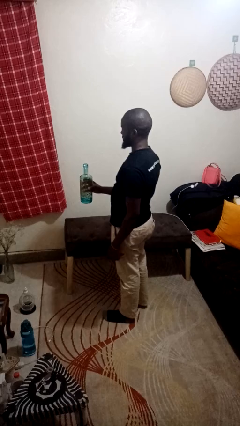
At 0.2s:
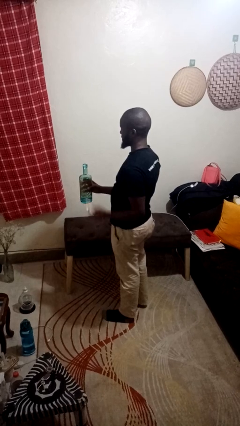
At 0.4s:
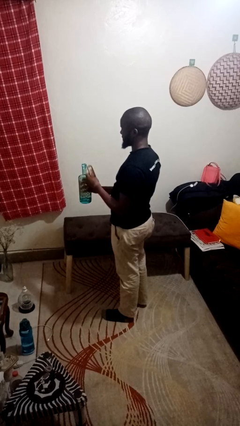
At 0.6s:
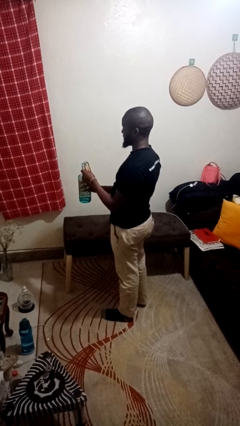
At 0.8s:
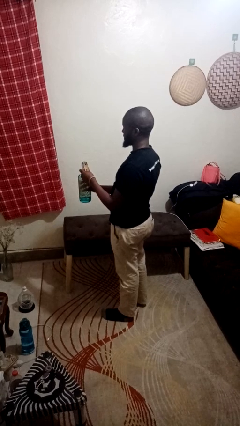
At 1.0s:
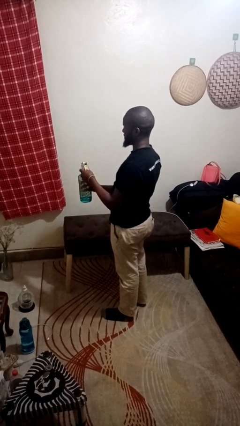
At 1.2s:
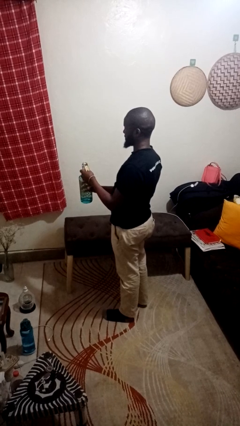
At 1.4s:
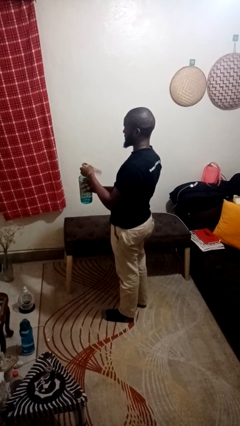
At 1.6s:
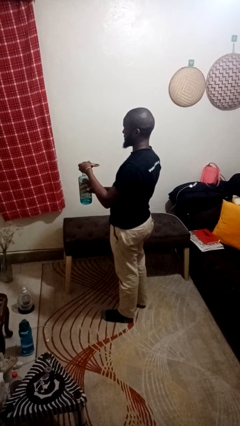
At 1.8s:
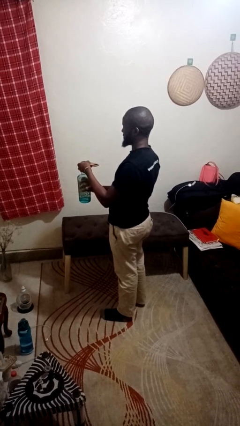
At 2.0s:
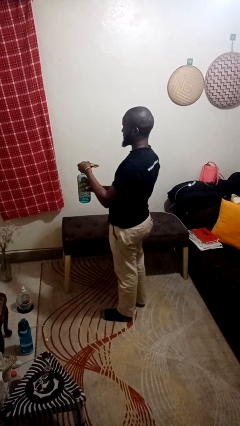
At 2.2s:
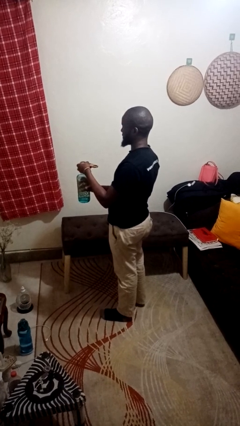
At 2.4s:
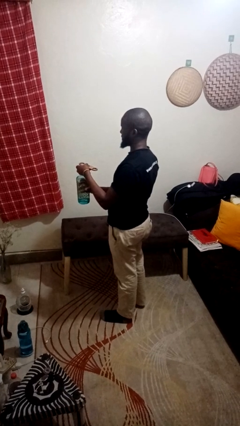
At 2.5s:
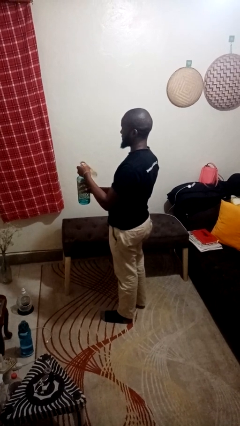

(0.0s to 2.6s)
person opens can with can opener

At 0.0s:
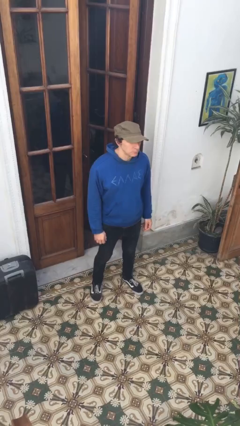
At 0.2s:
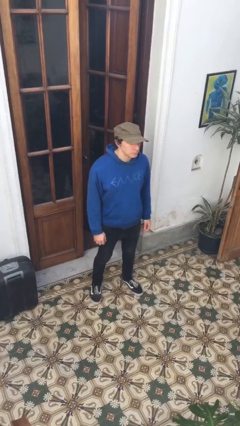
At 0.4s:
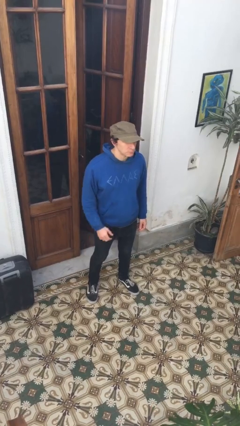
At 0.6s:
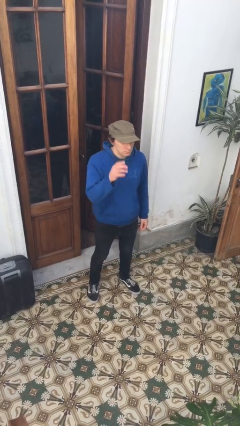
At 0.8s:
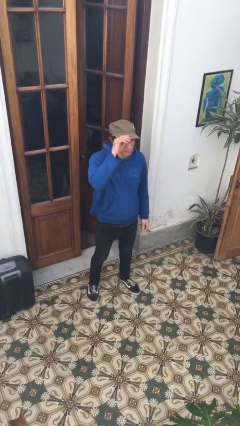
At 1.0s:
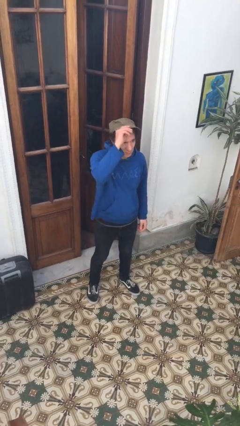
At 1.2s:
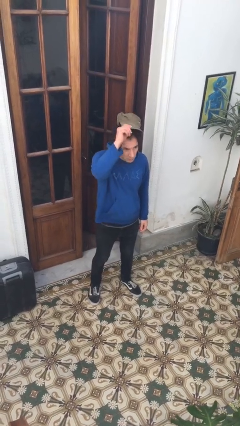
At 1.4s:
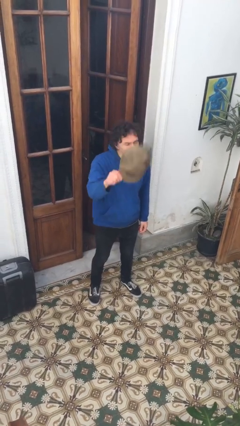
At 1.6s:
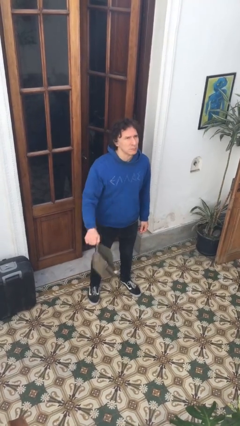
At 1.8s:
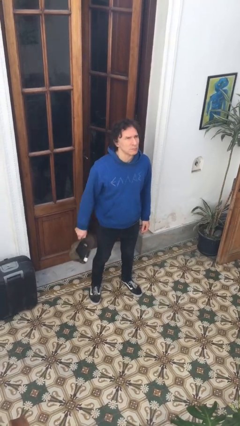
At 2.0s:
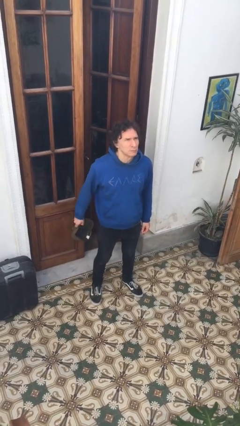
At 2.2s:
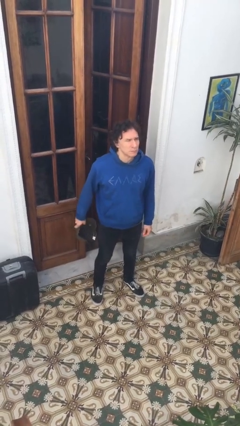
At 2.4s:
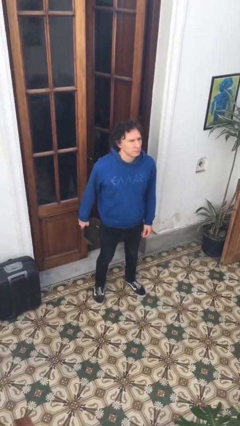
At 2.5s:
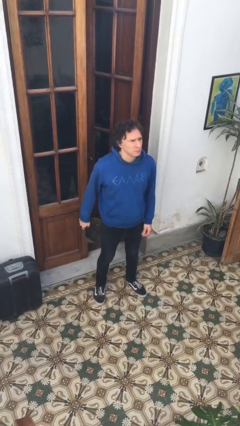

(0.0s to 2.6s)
person takes off hat

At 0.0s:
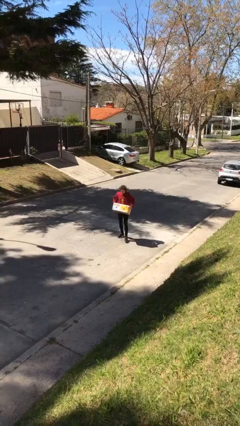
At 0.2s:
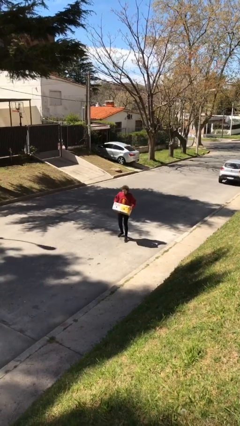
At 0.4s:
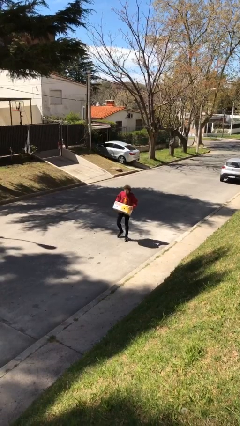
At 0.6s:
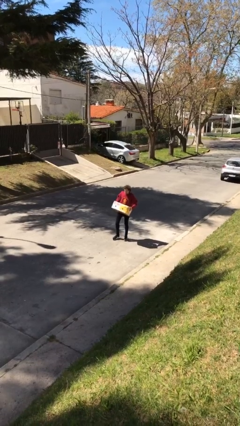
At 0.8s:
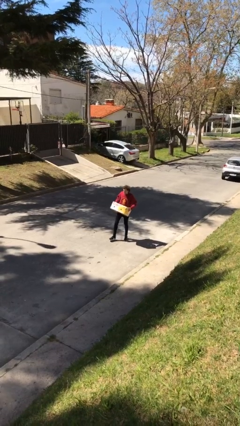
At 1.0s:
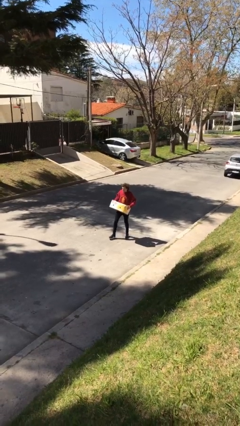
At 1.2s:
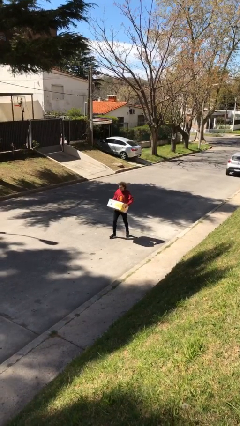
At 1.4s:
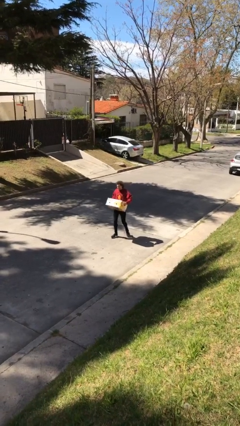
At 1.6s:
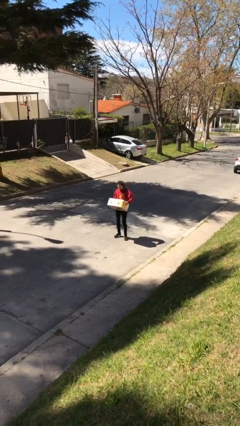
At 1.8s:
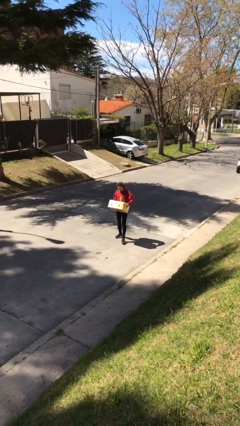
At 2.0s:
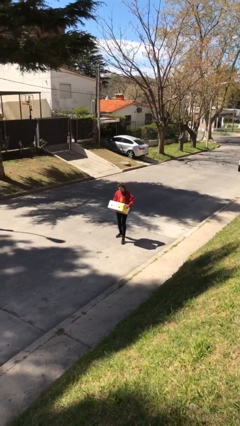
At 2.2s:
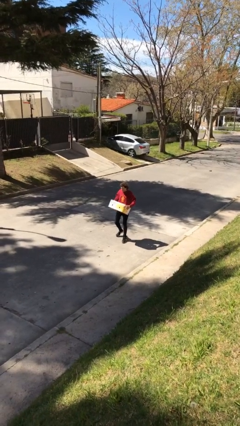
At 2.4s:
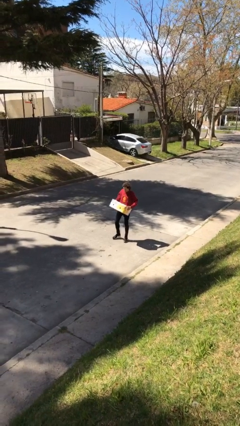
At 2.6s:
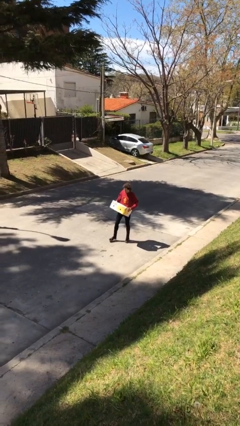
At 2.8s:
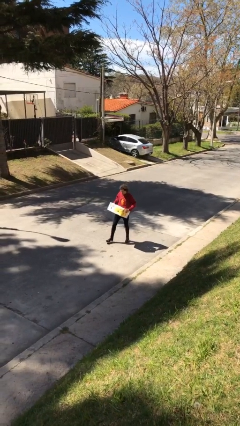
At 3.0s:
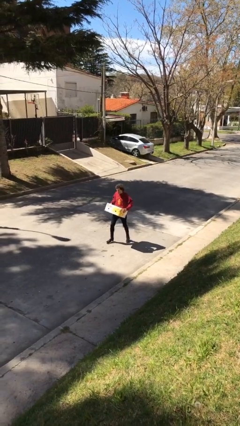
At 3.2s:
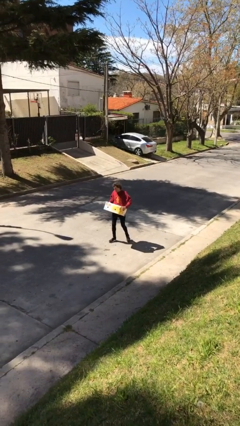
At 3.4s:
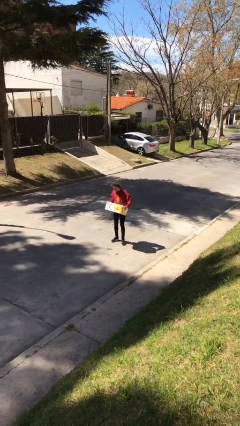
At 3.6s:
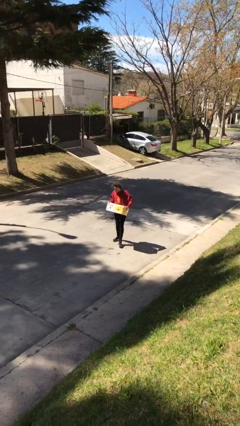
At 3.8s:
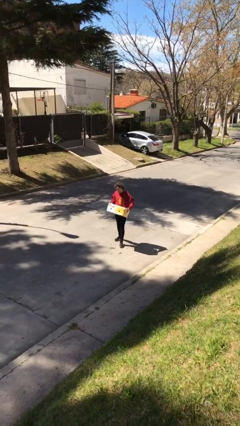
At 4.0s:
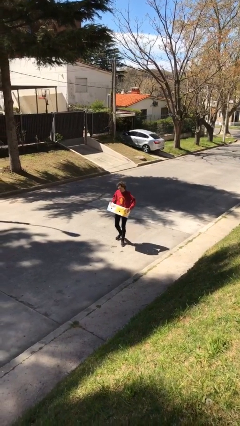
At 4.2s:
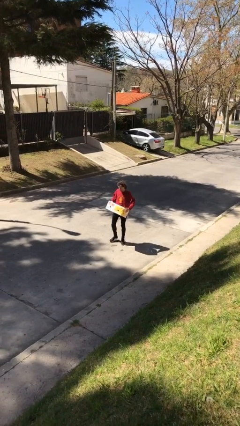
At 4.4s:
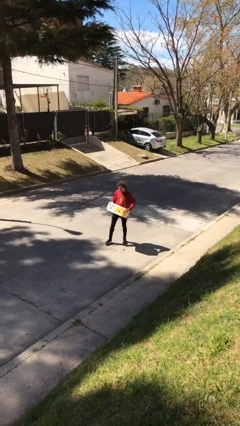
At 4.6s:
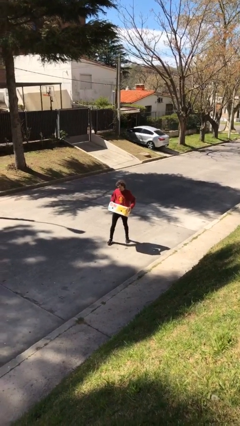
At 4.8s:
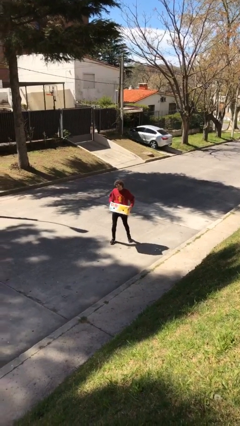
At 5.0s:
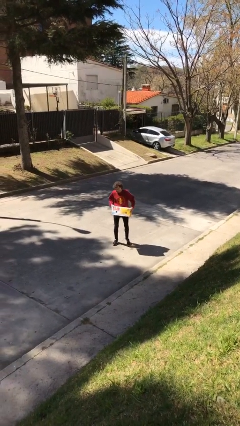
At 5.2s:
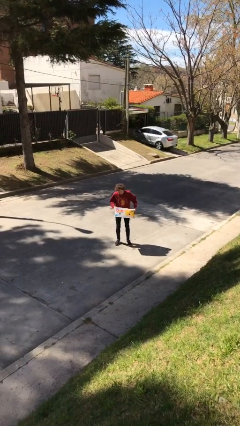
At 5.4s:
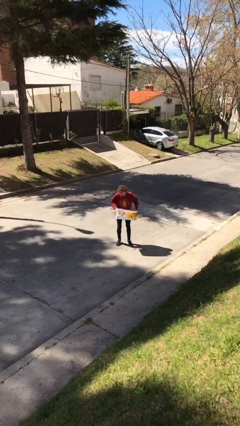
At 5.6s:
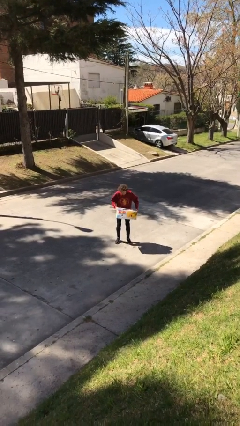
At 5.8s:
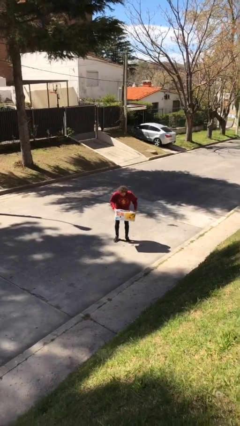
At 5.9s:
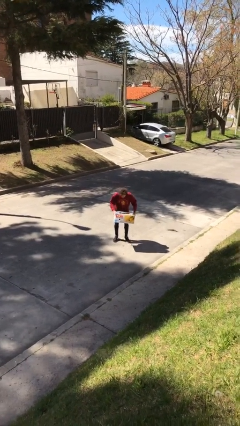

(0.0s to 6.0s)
person carries heavy object

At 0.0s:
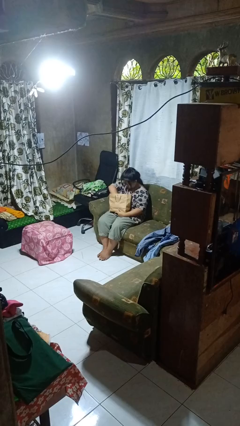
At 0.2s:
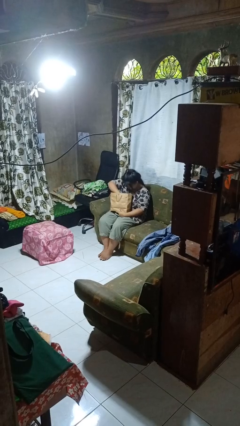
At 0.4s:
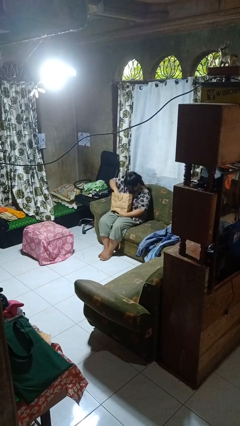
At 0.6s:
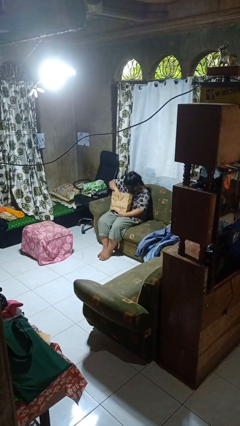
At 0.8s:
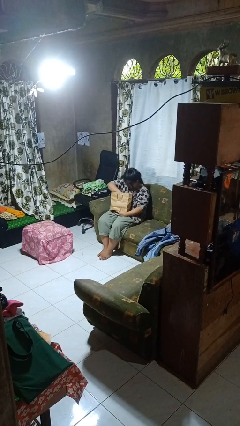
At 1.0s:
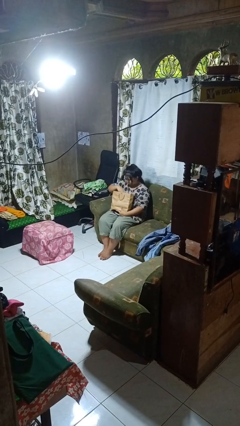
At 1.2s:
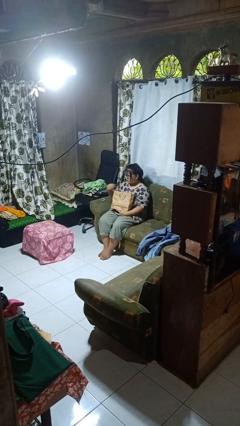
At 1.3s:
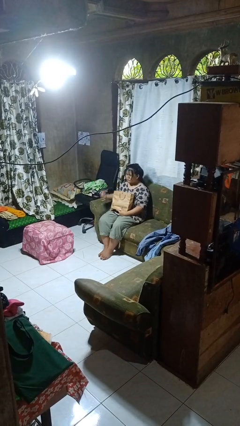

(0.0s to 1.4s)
person searches in bag

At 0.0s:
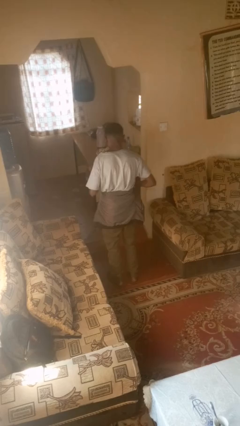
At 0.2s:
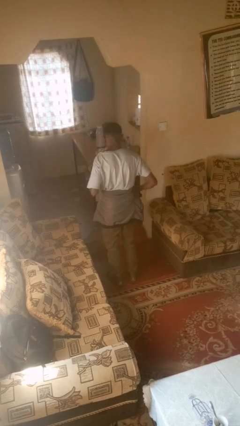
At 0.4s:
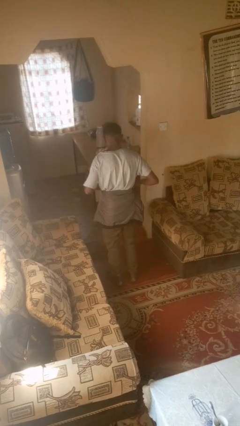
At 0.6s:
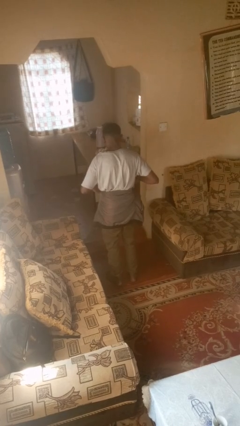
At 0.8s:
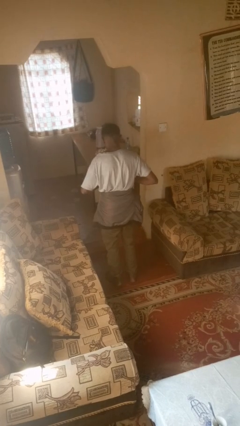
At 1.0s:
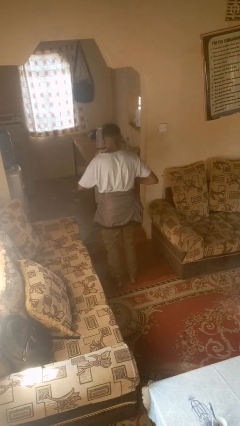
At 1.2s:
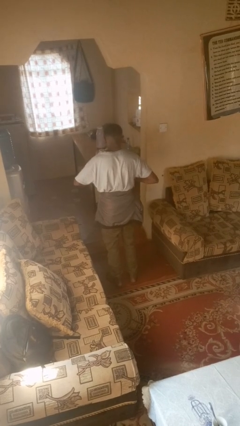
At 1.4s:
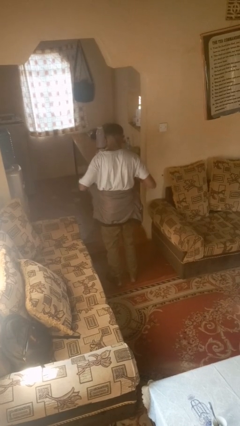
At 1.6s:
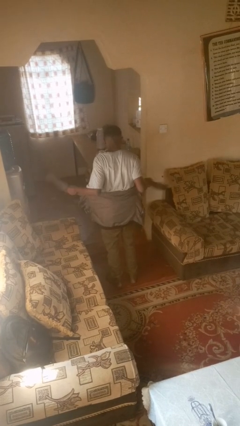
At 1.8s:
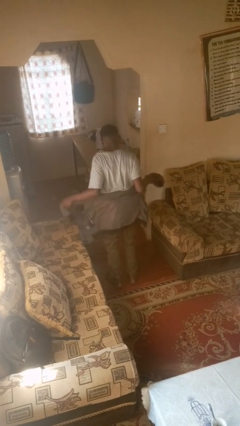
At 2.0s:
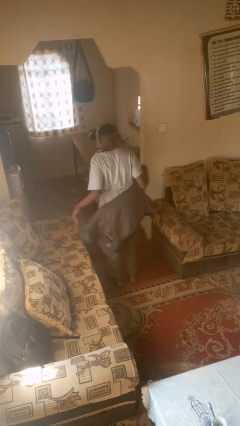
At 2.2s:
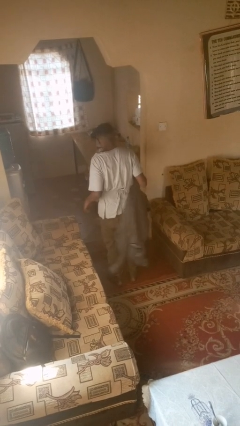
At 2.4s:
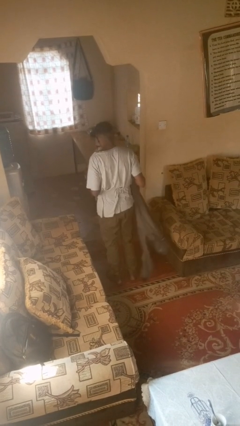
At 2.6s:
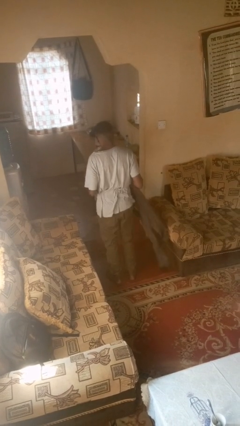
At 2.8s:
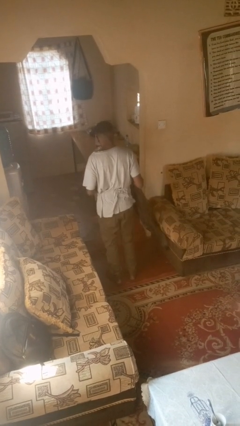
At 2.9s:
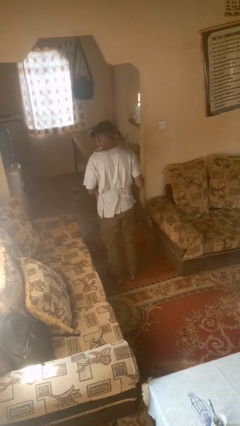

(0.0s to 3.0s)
person unties jacket around waist

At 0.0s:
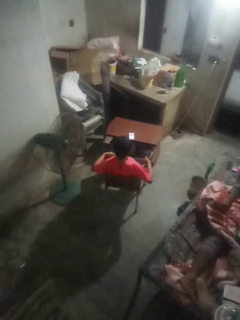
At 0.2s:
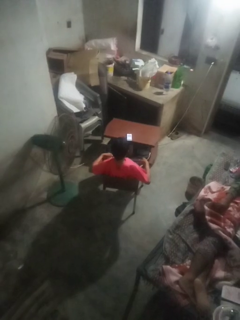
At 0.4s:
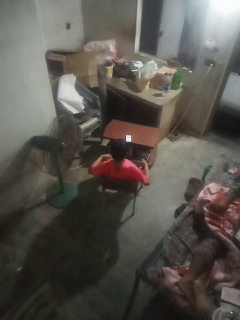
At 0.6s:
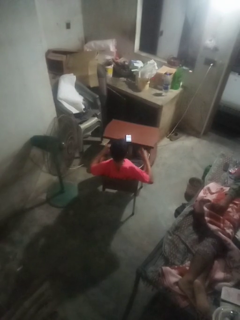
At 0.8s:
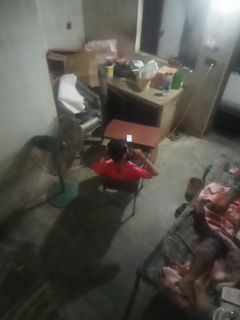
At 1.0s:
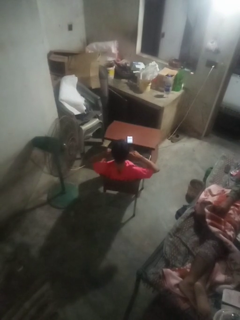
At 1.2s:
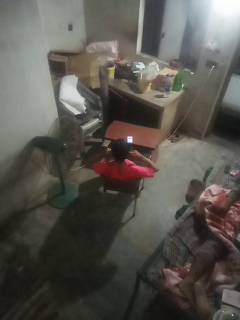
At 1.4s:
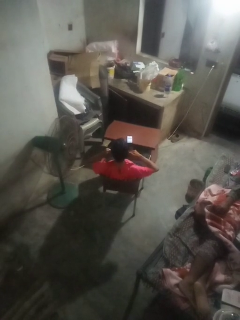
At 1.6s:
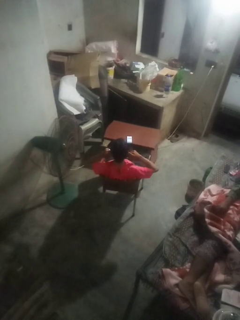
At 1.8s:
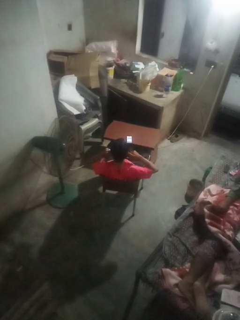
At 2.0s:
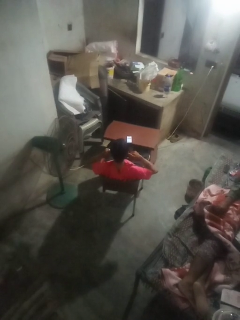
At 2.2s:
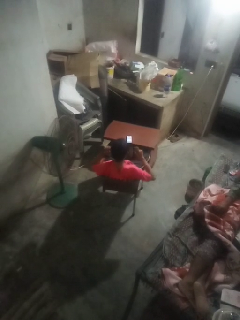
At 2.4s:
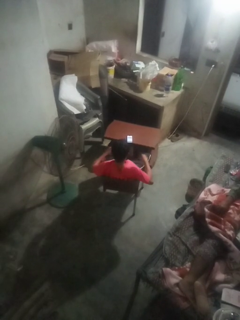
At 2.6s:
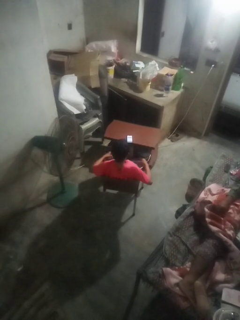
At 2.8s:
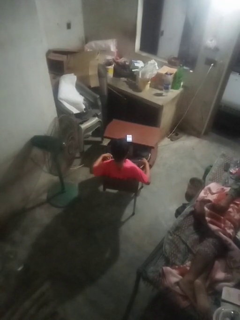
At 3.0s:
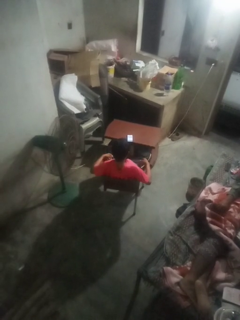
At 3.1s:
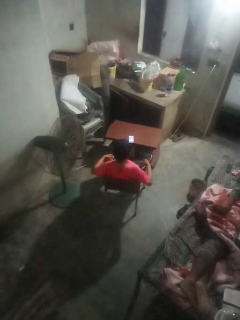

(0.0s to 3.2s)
person puts fingers in ear
